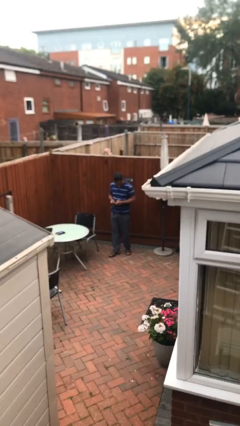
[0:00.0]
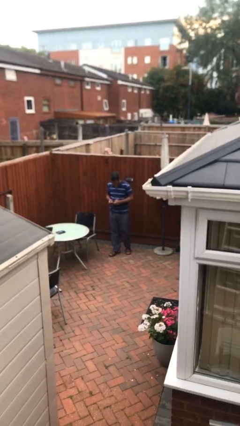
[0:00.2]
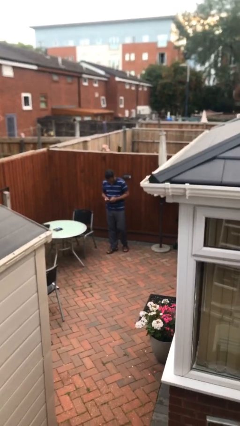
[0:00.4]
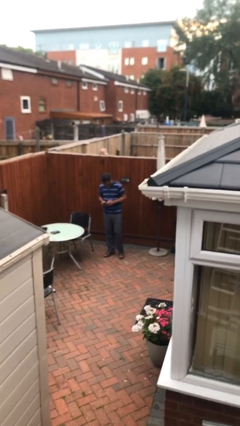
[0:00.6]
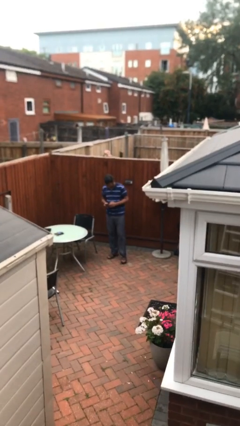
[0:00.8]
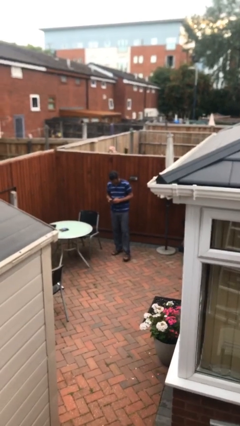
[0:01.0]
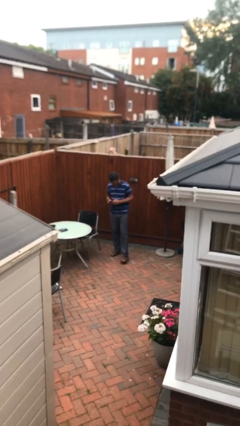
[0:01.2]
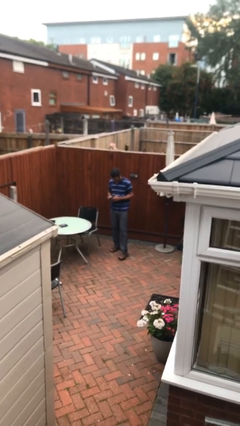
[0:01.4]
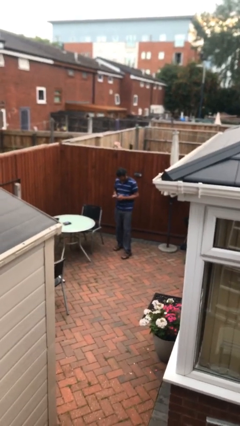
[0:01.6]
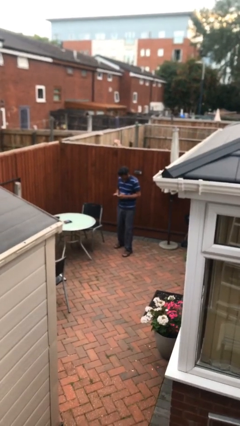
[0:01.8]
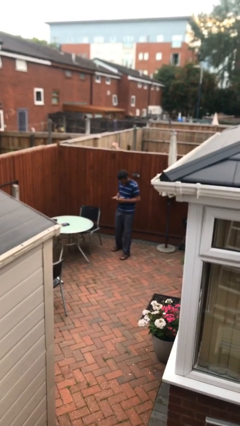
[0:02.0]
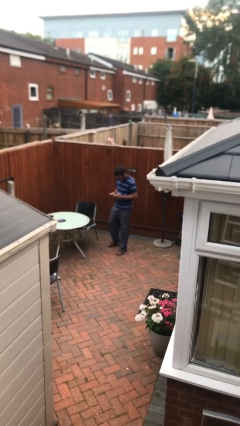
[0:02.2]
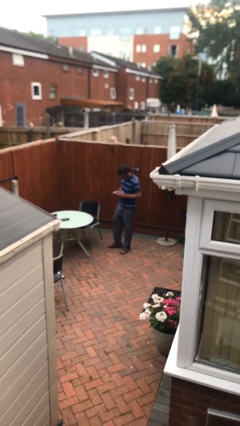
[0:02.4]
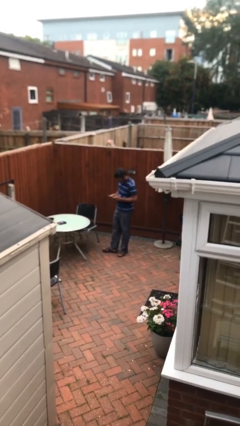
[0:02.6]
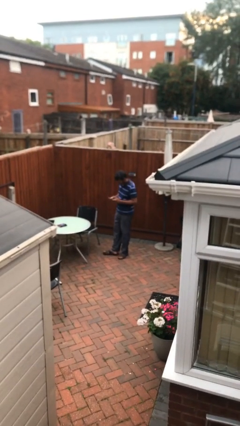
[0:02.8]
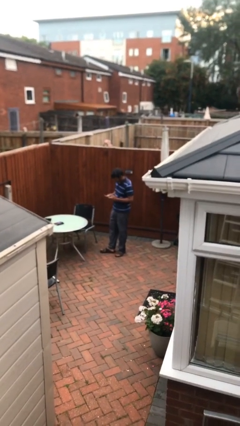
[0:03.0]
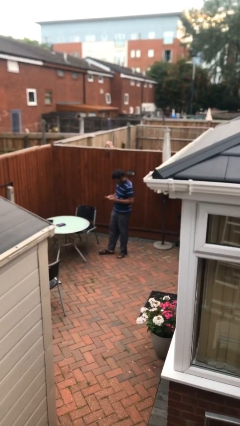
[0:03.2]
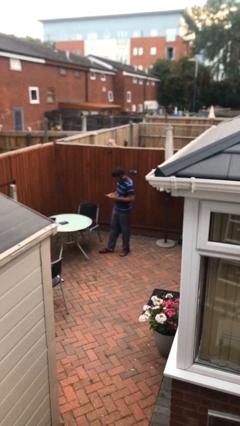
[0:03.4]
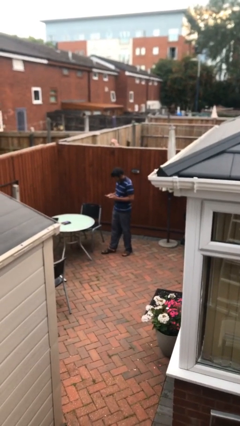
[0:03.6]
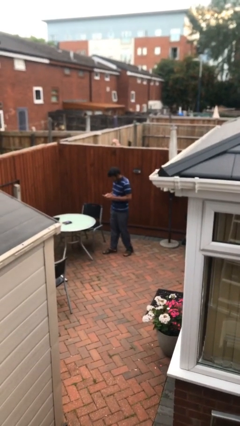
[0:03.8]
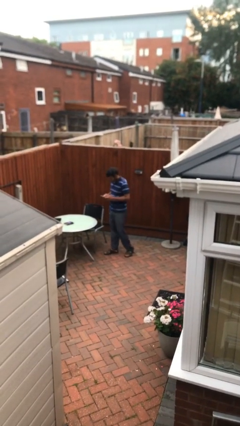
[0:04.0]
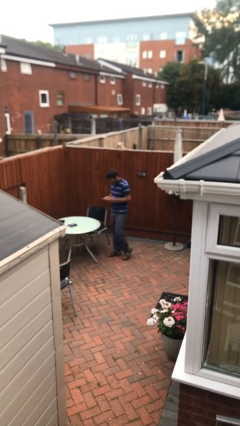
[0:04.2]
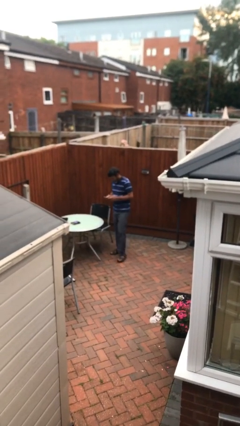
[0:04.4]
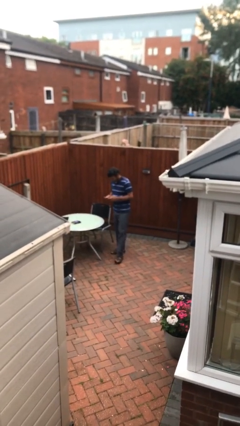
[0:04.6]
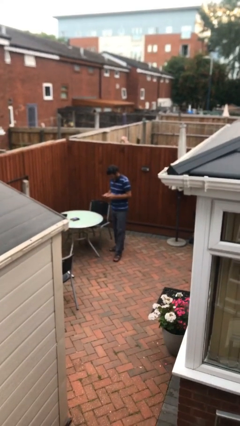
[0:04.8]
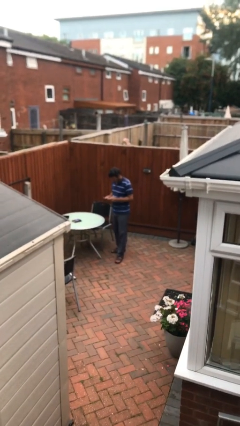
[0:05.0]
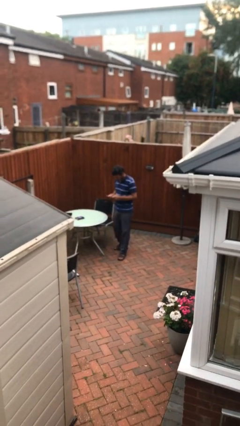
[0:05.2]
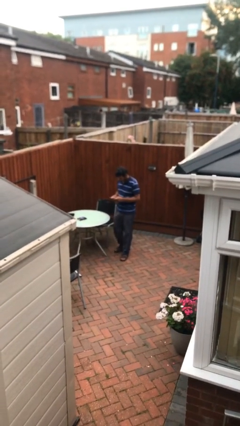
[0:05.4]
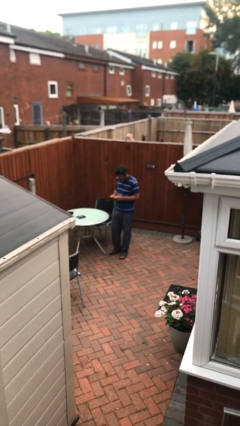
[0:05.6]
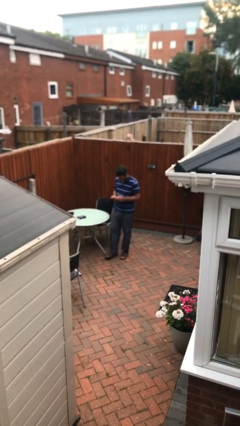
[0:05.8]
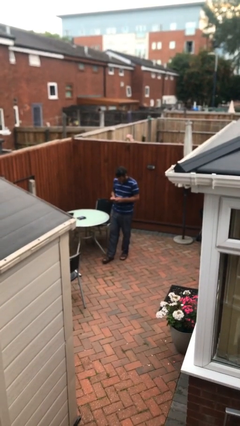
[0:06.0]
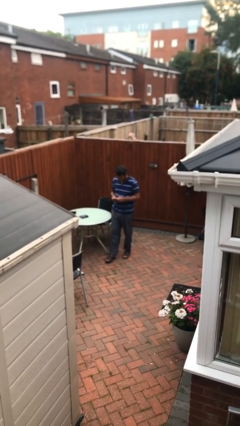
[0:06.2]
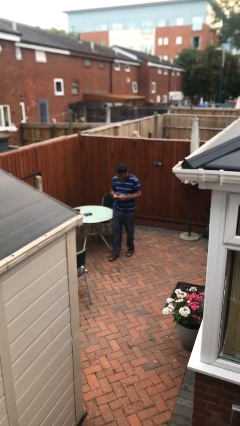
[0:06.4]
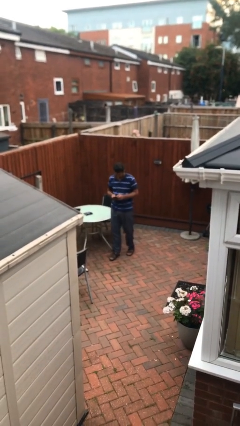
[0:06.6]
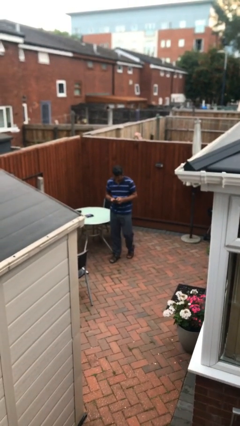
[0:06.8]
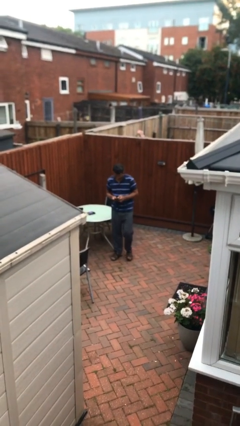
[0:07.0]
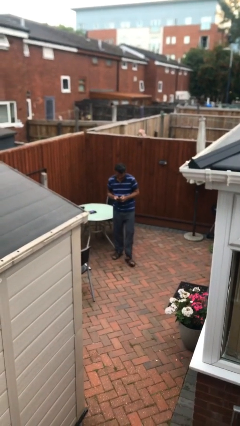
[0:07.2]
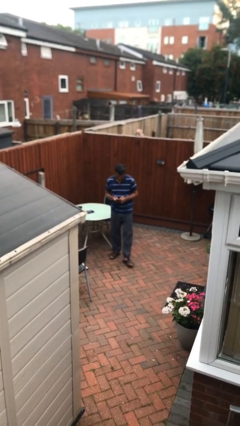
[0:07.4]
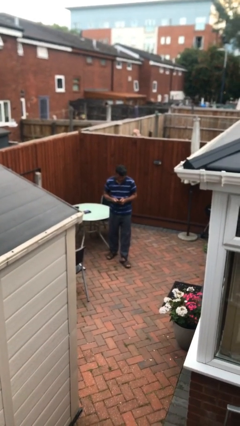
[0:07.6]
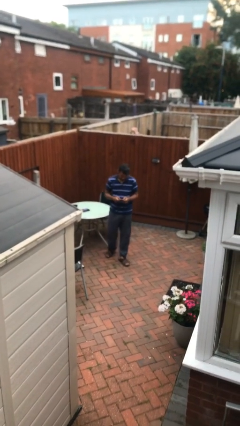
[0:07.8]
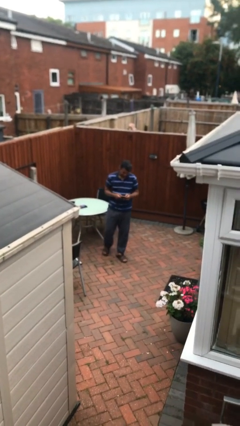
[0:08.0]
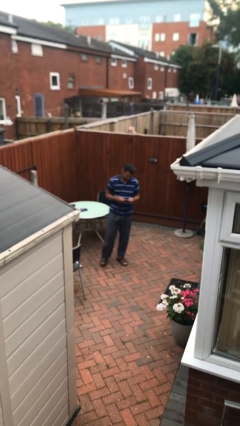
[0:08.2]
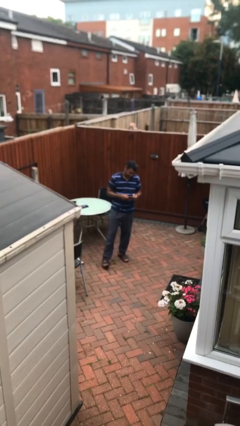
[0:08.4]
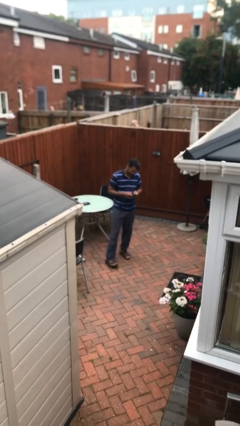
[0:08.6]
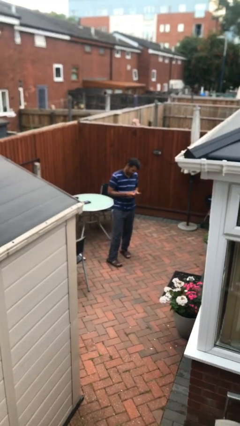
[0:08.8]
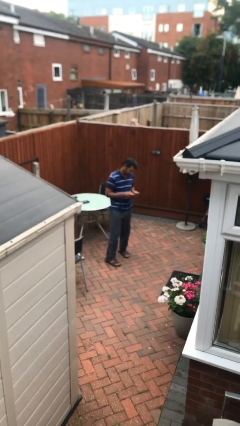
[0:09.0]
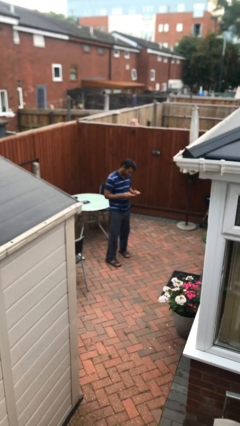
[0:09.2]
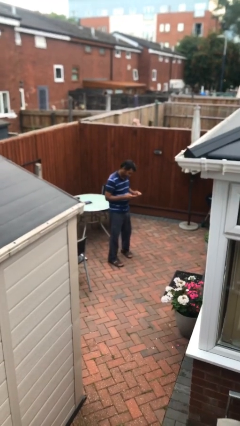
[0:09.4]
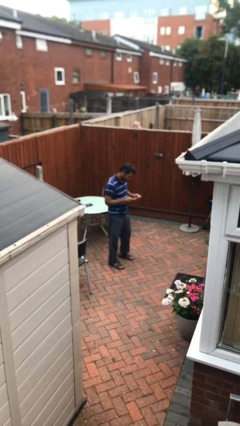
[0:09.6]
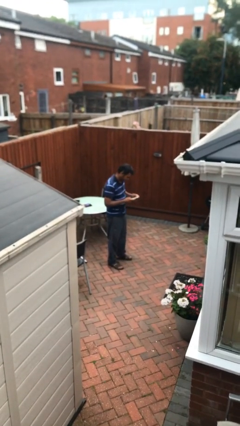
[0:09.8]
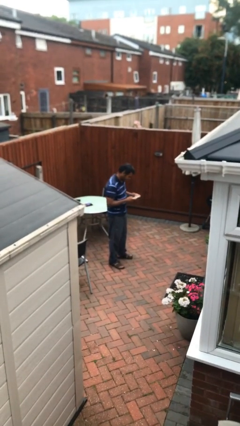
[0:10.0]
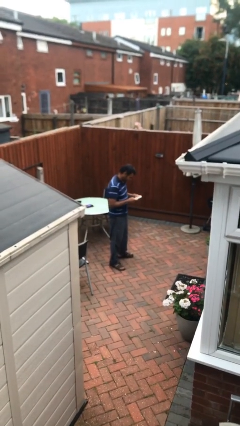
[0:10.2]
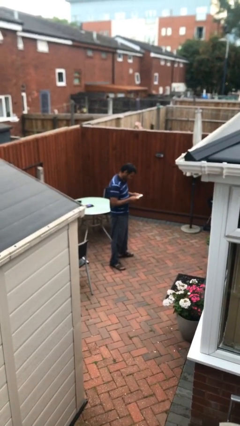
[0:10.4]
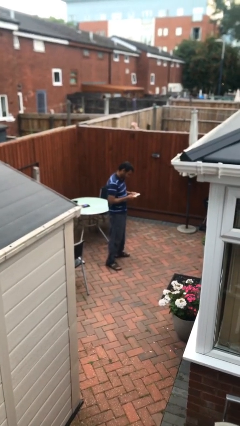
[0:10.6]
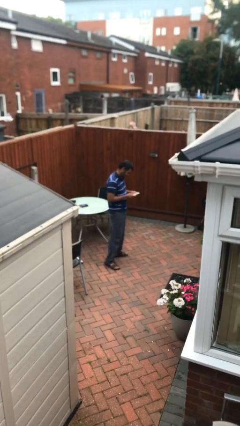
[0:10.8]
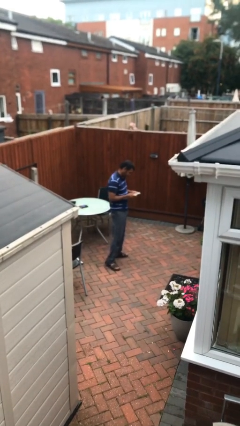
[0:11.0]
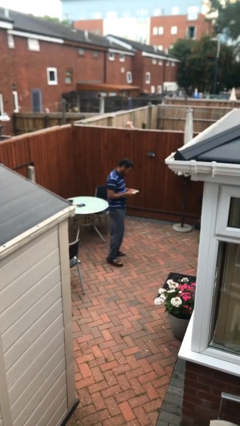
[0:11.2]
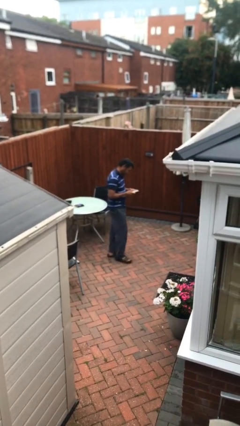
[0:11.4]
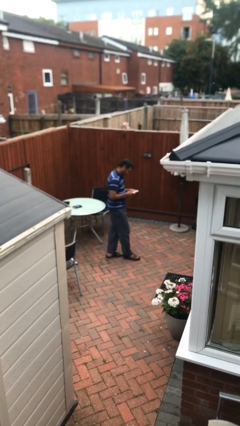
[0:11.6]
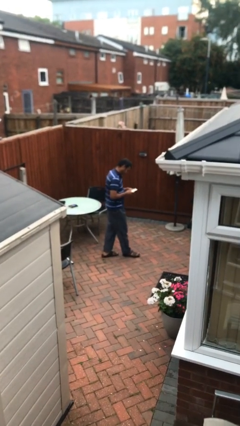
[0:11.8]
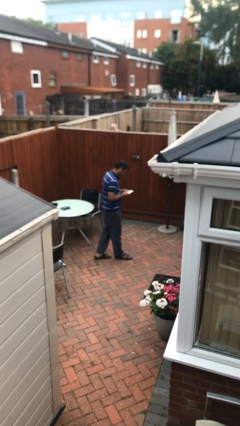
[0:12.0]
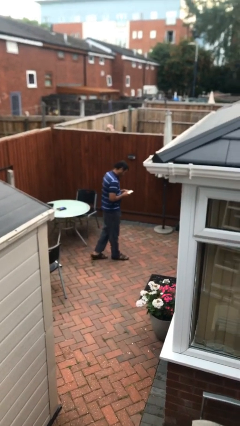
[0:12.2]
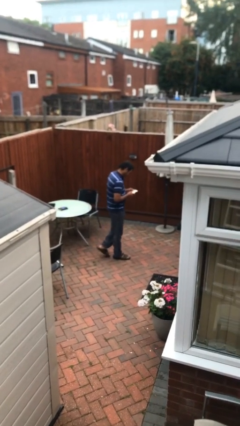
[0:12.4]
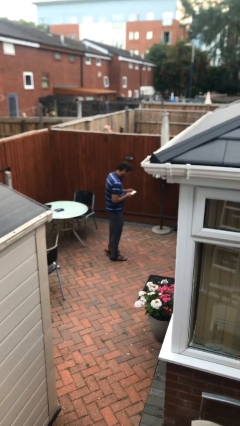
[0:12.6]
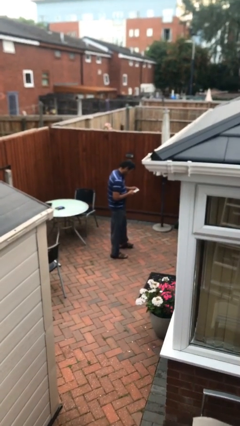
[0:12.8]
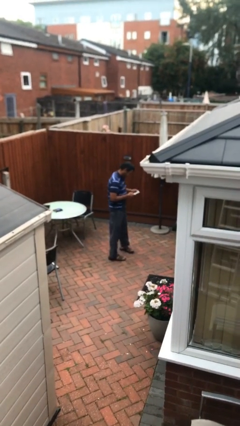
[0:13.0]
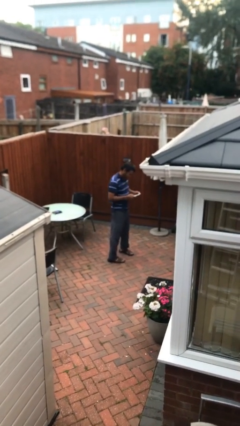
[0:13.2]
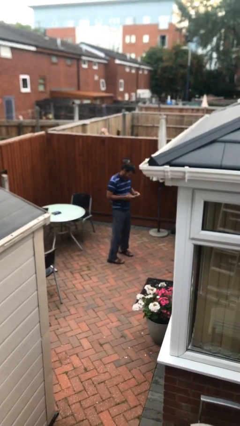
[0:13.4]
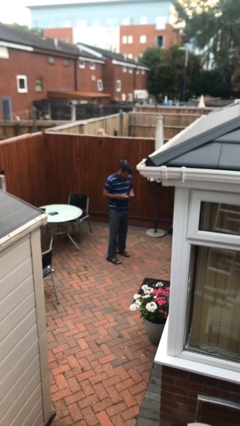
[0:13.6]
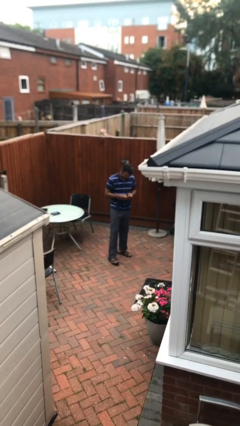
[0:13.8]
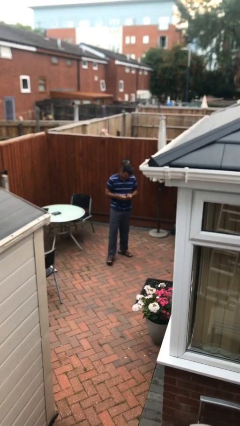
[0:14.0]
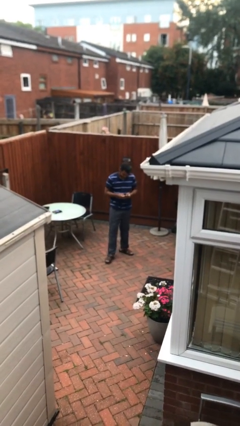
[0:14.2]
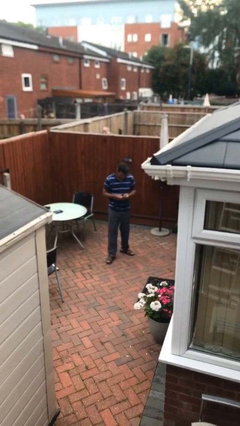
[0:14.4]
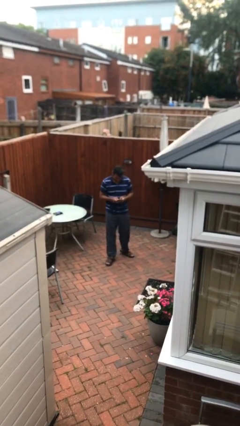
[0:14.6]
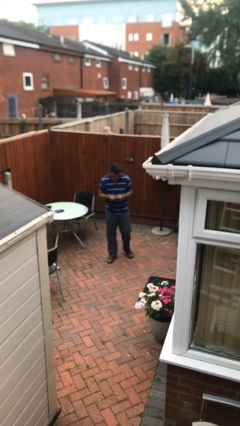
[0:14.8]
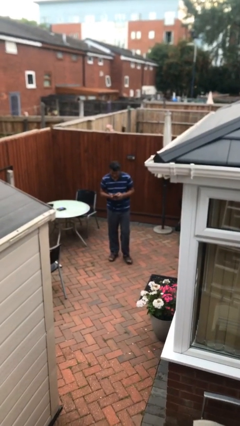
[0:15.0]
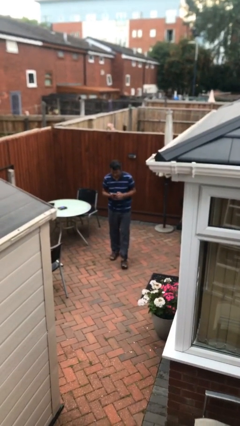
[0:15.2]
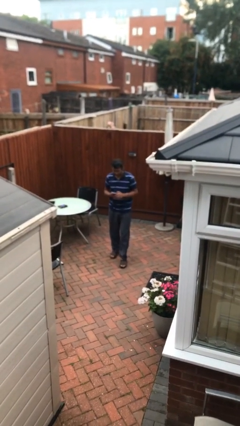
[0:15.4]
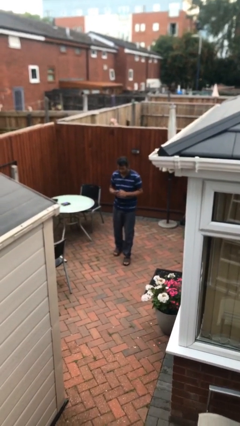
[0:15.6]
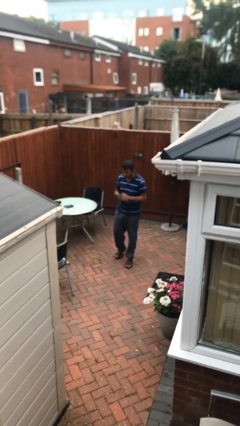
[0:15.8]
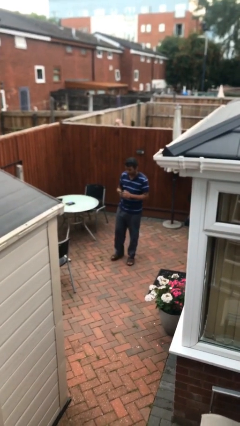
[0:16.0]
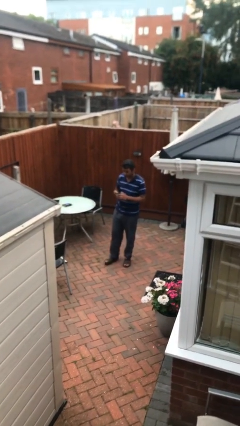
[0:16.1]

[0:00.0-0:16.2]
person texts on phone

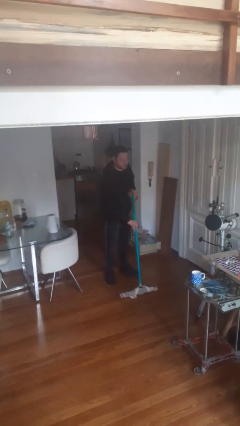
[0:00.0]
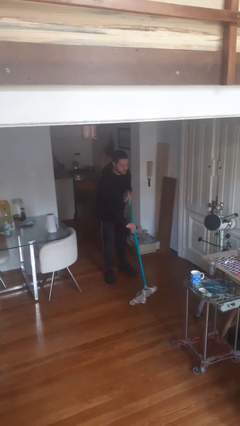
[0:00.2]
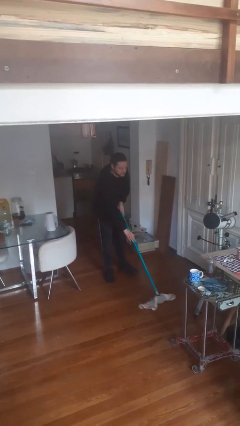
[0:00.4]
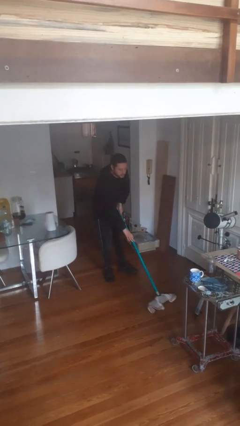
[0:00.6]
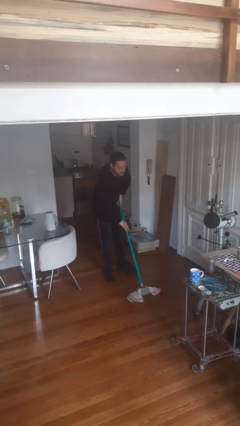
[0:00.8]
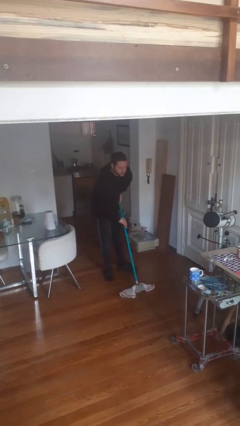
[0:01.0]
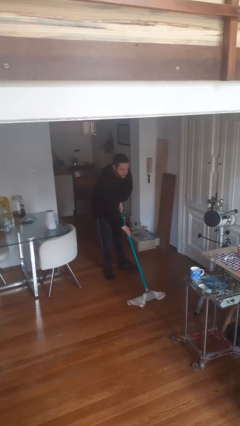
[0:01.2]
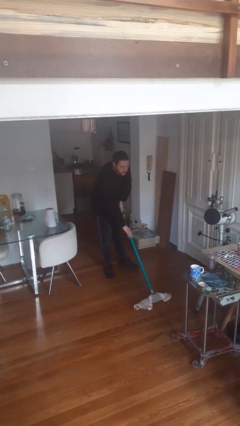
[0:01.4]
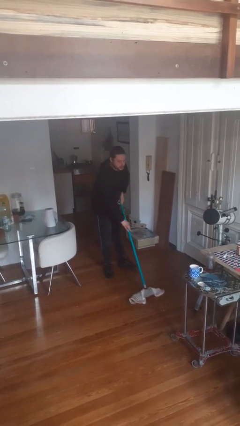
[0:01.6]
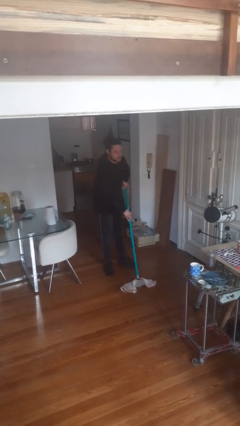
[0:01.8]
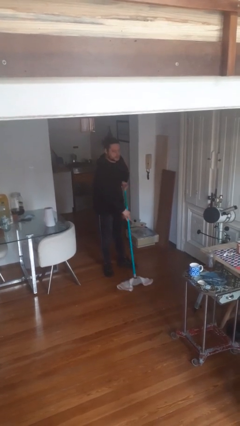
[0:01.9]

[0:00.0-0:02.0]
person mops

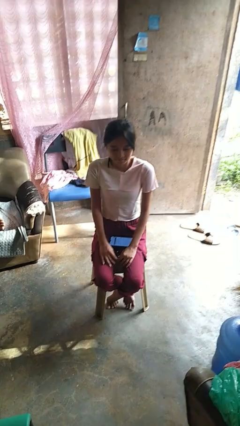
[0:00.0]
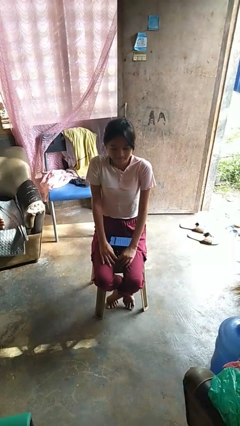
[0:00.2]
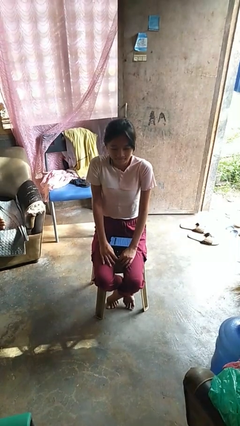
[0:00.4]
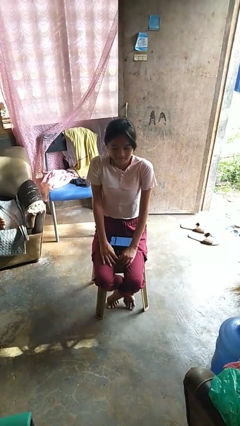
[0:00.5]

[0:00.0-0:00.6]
person shrugs
